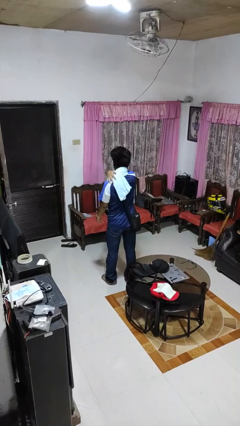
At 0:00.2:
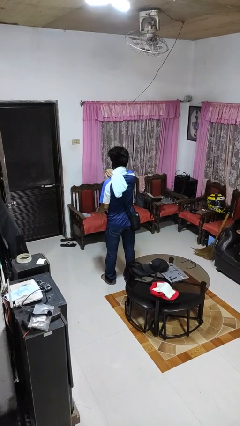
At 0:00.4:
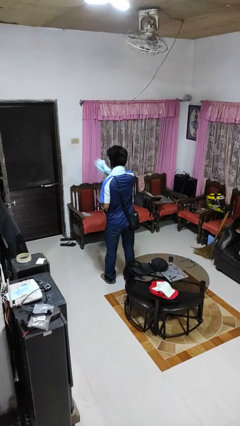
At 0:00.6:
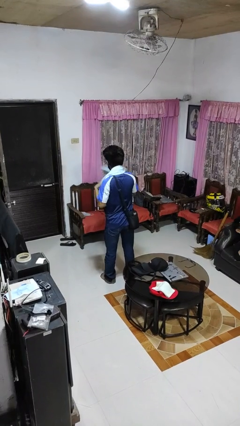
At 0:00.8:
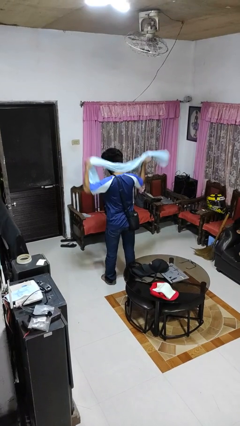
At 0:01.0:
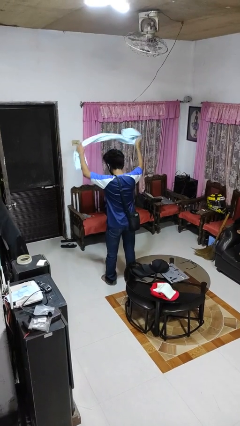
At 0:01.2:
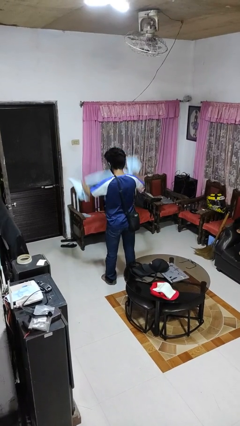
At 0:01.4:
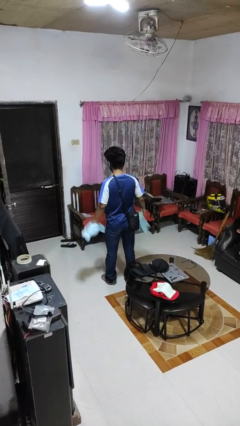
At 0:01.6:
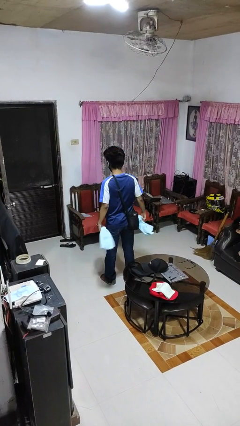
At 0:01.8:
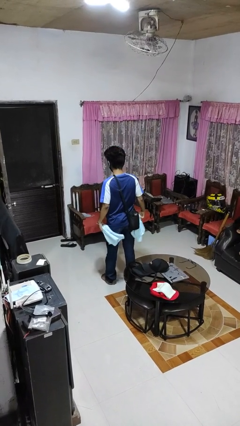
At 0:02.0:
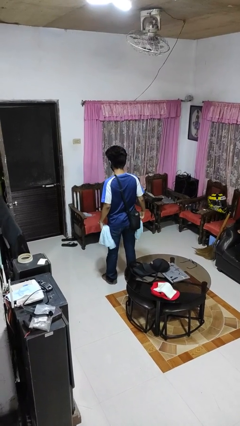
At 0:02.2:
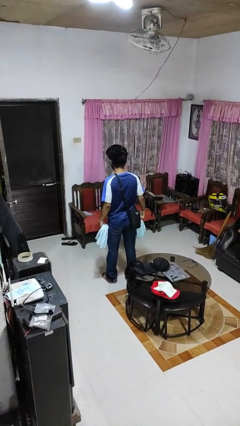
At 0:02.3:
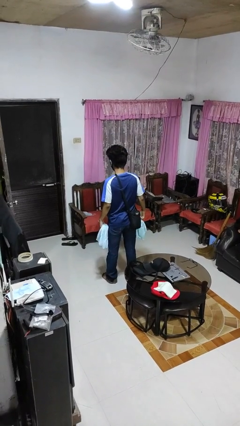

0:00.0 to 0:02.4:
person takes off scarf

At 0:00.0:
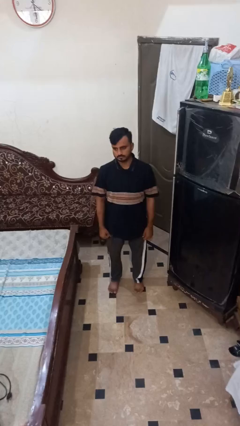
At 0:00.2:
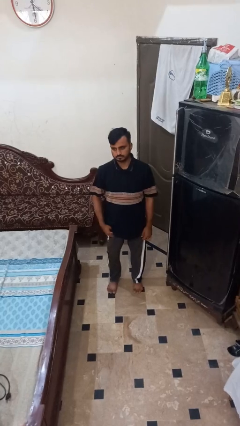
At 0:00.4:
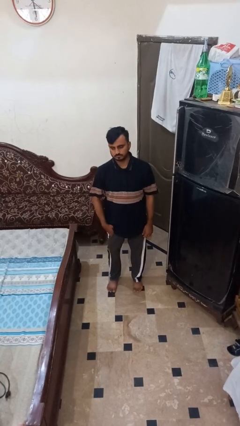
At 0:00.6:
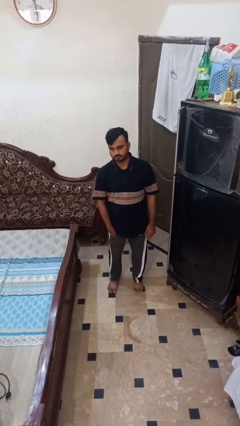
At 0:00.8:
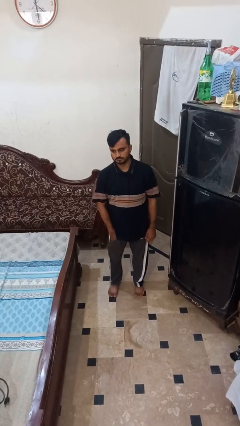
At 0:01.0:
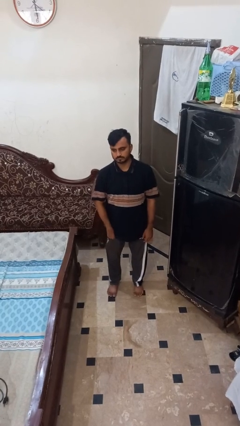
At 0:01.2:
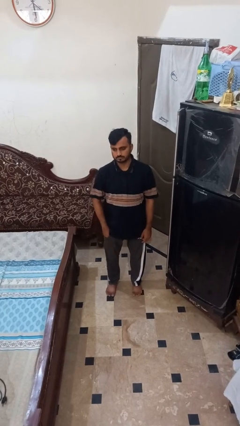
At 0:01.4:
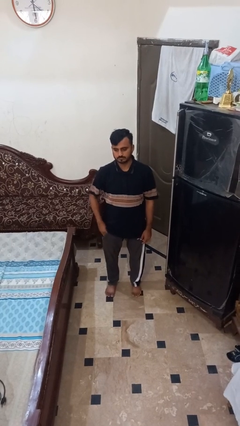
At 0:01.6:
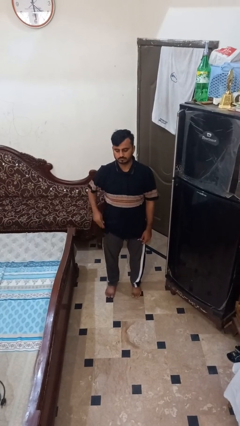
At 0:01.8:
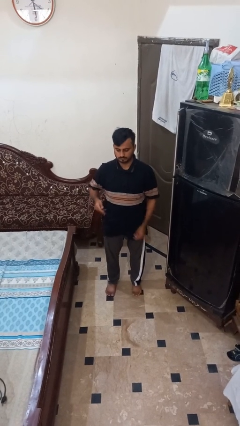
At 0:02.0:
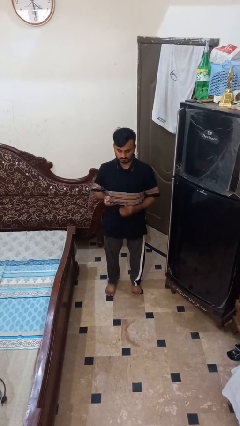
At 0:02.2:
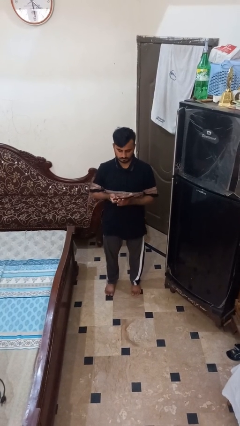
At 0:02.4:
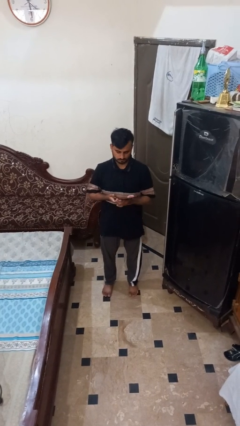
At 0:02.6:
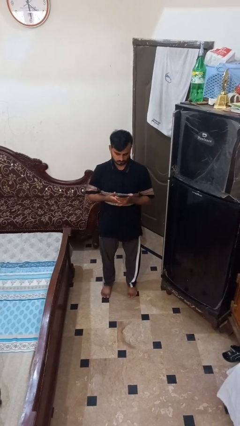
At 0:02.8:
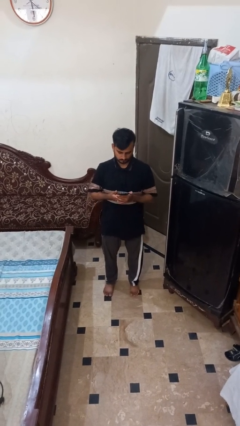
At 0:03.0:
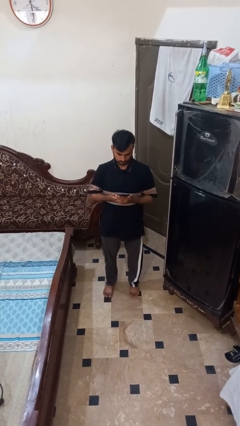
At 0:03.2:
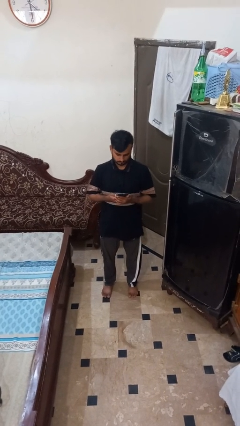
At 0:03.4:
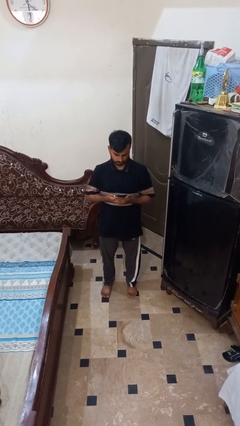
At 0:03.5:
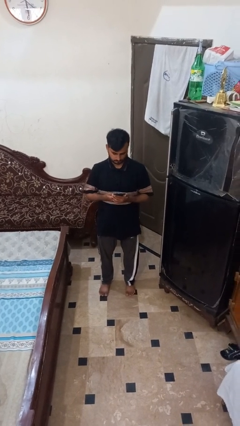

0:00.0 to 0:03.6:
person takes phone from pocket

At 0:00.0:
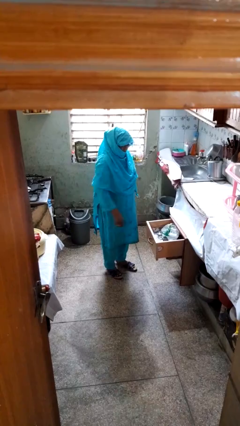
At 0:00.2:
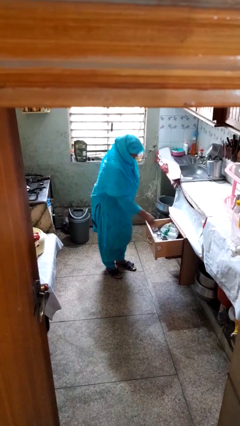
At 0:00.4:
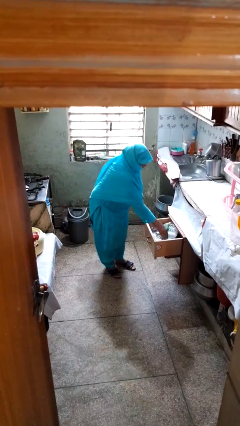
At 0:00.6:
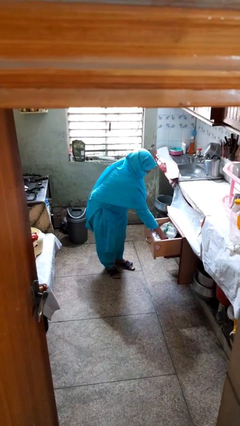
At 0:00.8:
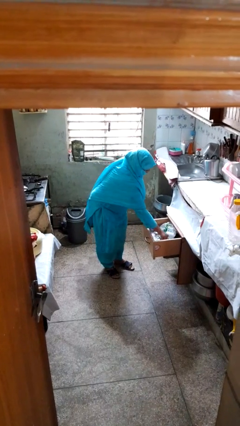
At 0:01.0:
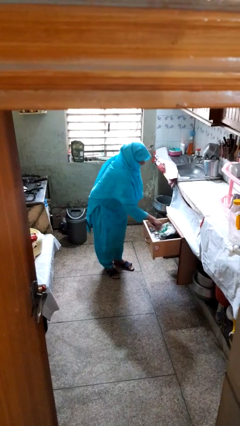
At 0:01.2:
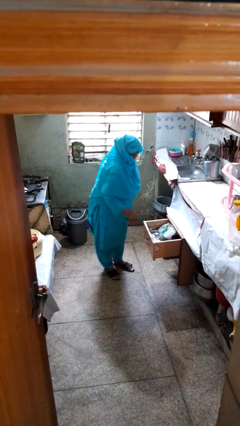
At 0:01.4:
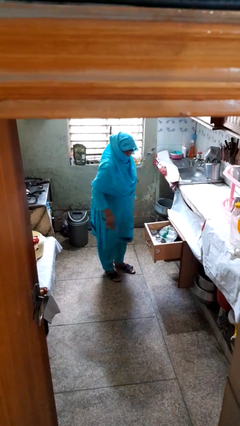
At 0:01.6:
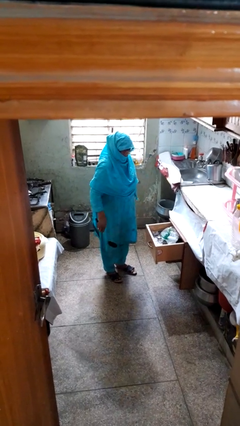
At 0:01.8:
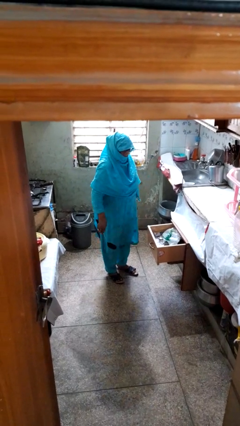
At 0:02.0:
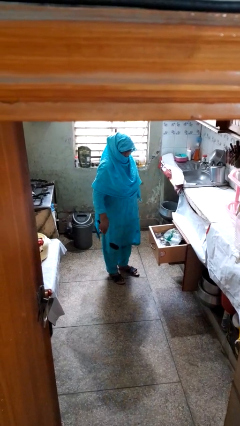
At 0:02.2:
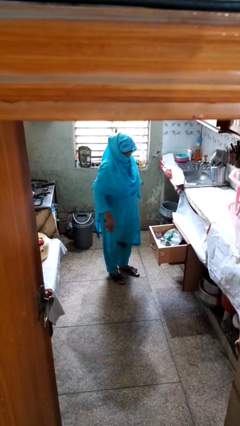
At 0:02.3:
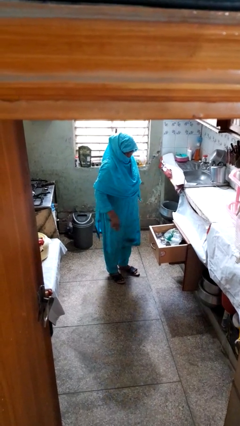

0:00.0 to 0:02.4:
person takes object from kitchen drawer

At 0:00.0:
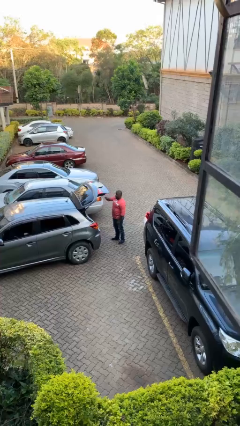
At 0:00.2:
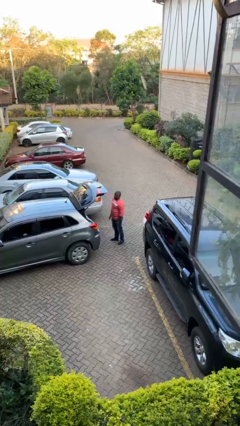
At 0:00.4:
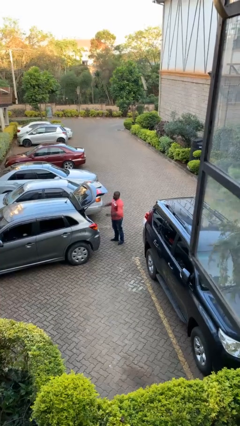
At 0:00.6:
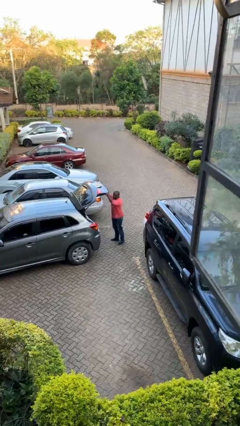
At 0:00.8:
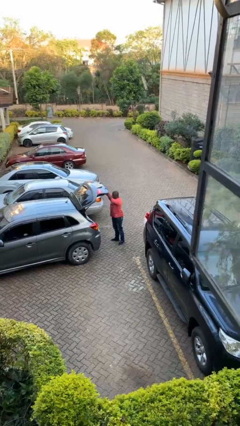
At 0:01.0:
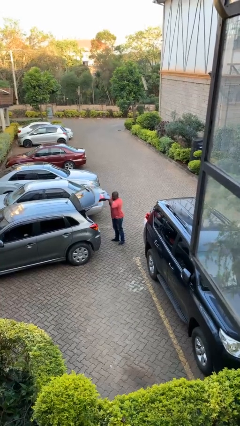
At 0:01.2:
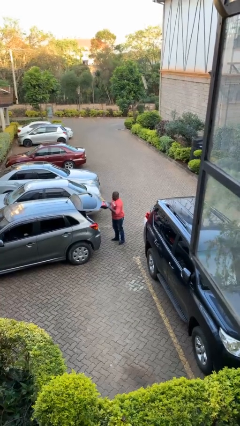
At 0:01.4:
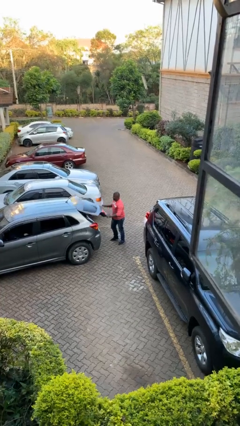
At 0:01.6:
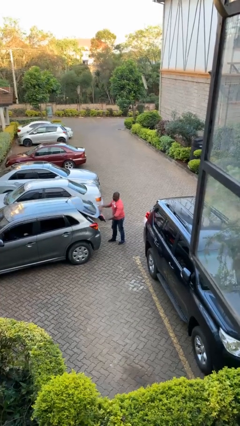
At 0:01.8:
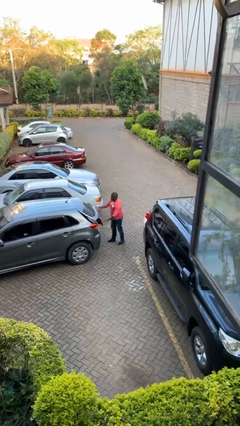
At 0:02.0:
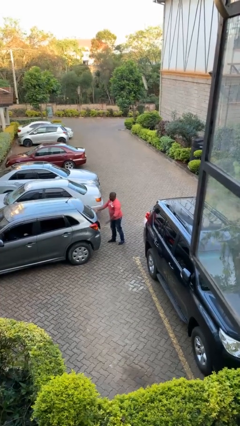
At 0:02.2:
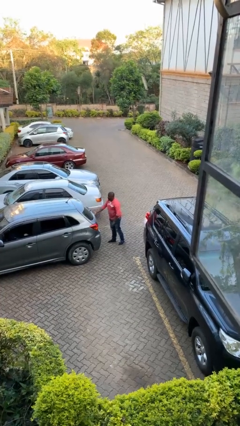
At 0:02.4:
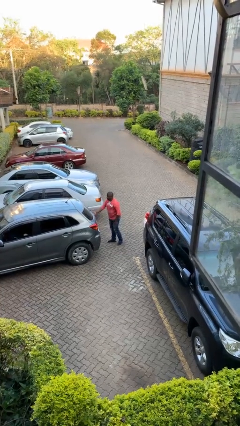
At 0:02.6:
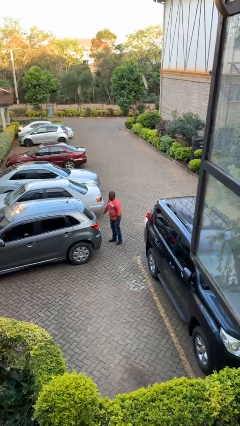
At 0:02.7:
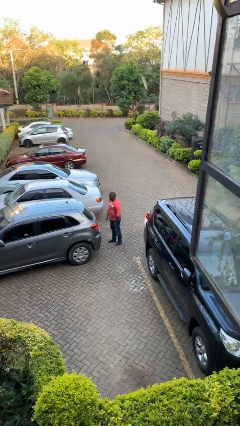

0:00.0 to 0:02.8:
person closes car trunk

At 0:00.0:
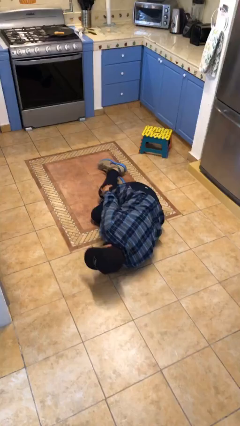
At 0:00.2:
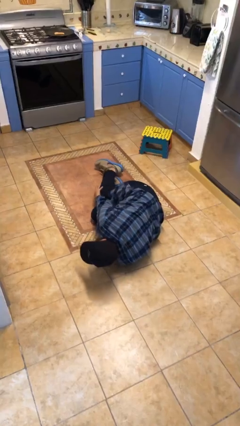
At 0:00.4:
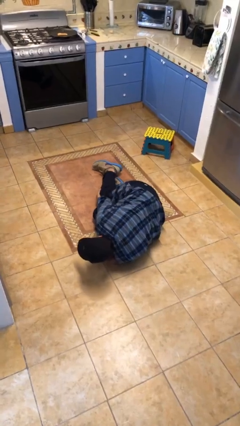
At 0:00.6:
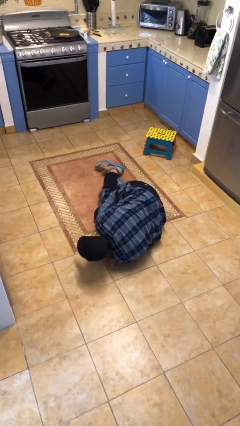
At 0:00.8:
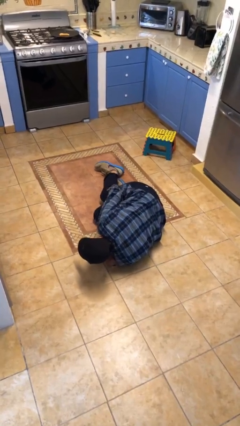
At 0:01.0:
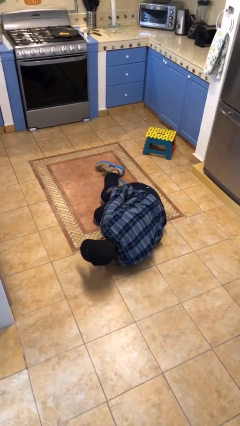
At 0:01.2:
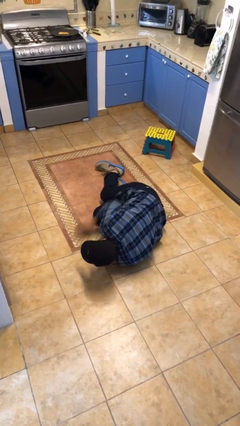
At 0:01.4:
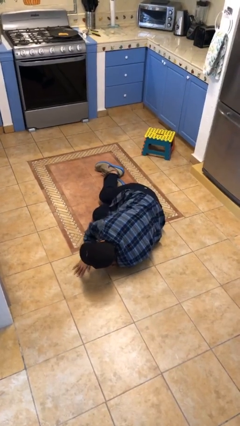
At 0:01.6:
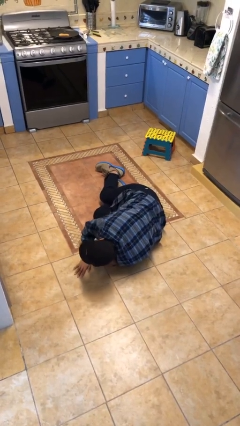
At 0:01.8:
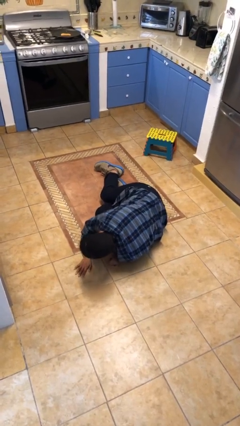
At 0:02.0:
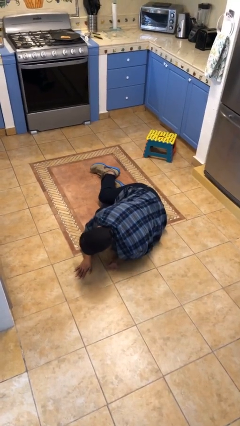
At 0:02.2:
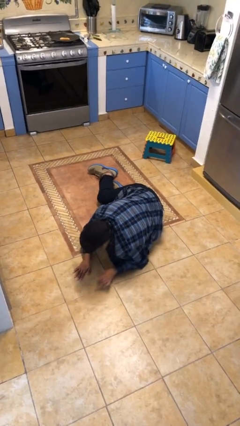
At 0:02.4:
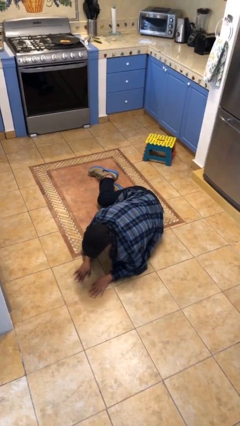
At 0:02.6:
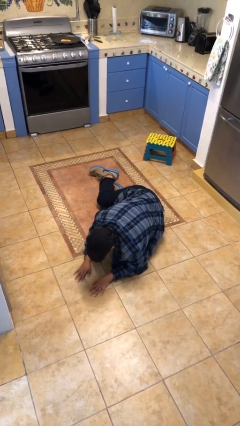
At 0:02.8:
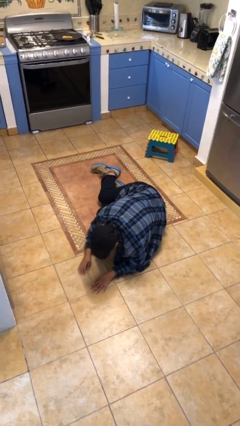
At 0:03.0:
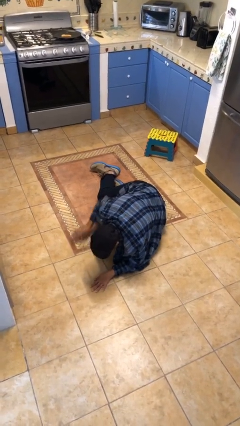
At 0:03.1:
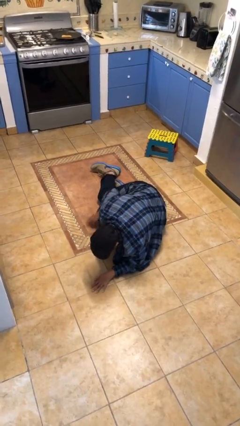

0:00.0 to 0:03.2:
person lies down on floor

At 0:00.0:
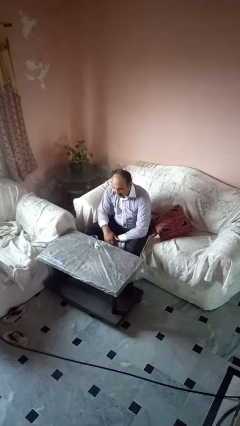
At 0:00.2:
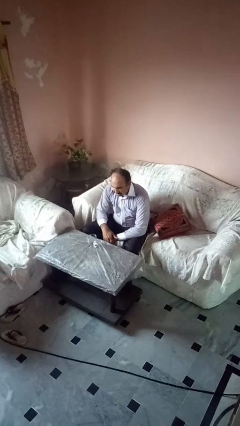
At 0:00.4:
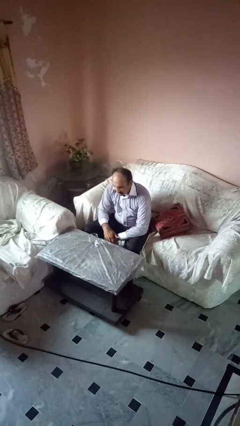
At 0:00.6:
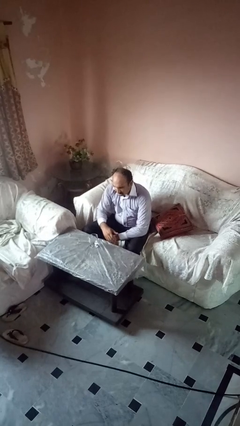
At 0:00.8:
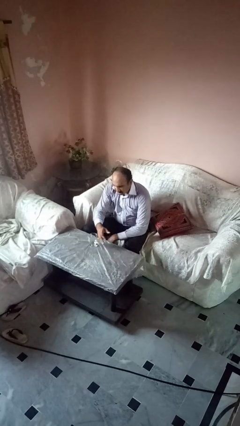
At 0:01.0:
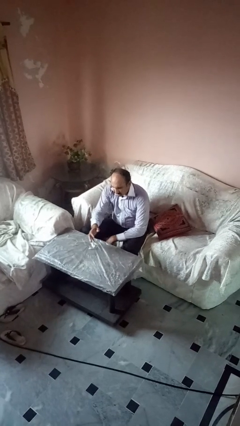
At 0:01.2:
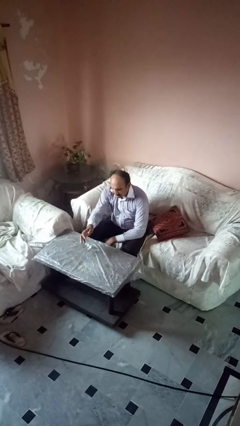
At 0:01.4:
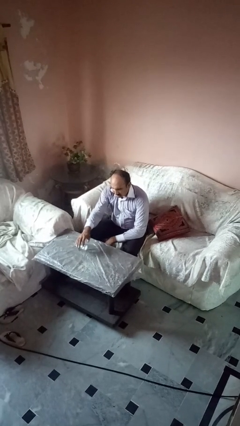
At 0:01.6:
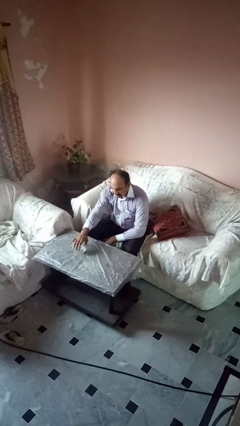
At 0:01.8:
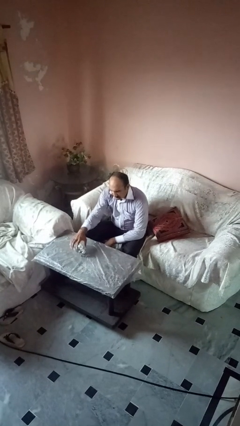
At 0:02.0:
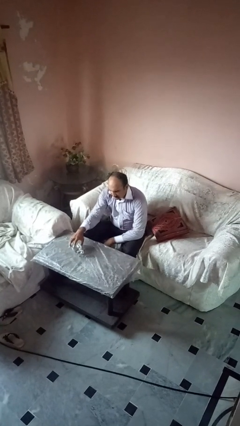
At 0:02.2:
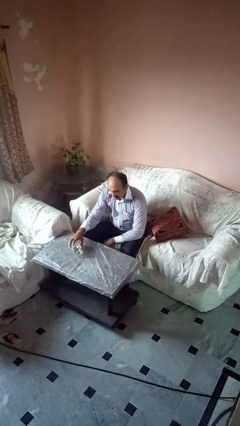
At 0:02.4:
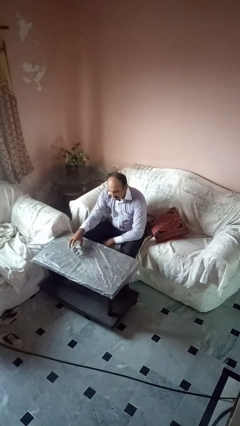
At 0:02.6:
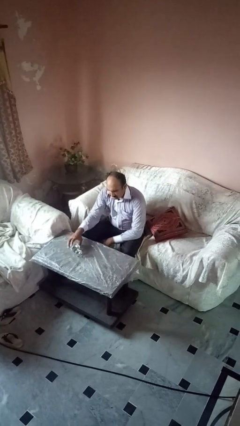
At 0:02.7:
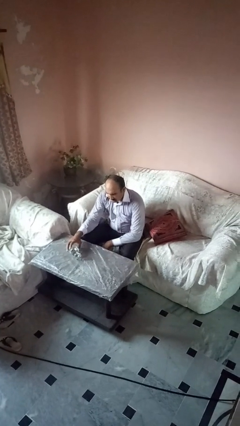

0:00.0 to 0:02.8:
person spills on table

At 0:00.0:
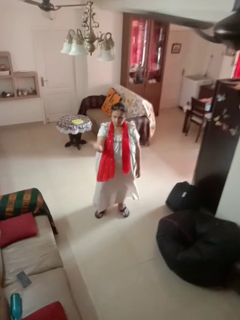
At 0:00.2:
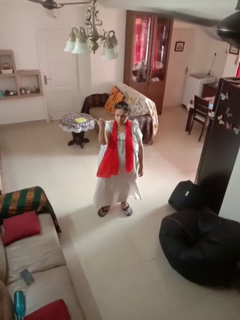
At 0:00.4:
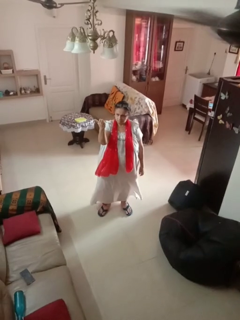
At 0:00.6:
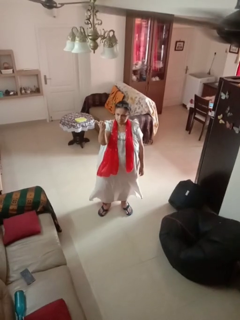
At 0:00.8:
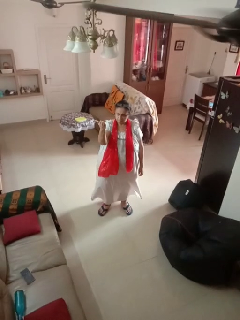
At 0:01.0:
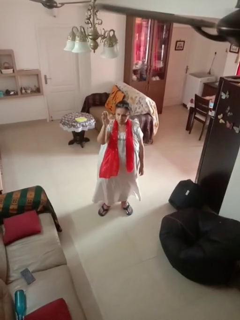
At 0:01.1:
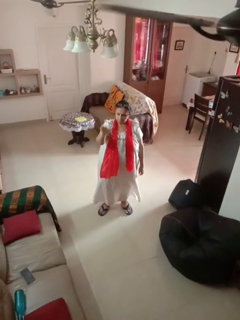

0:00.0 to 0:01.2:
person gestures swipe up
